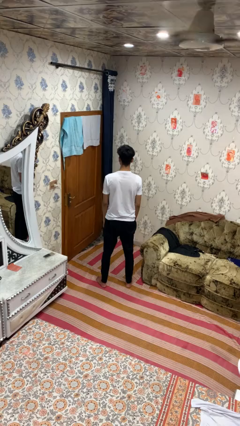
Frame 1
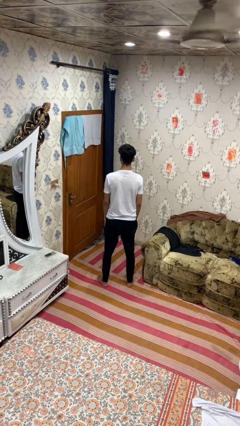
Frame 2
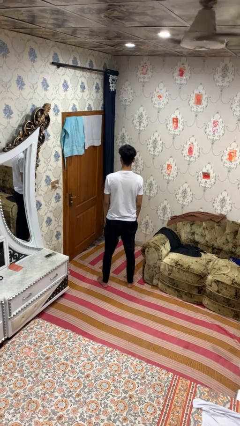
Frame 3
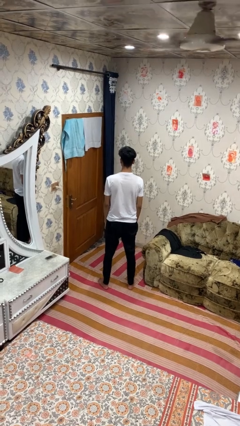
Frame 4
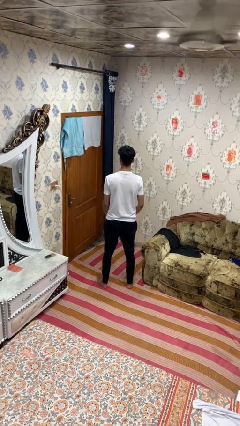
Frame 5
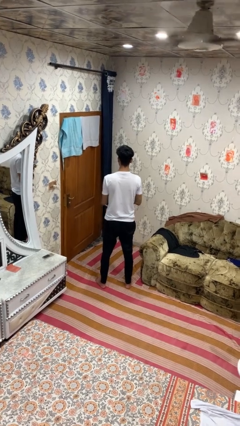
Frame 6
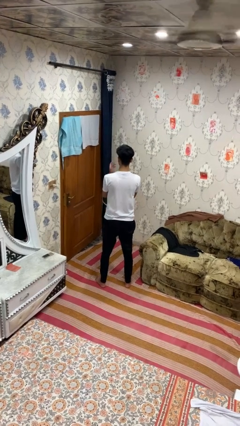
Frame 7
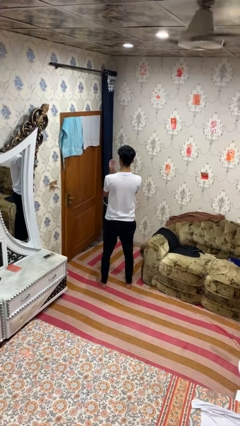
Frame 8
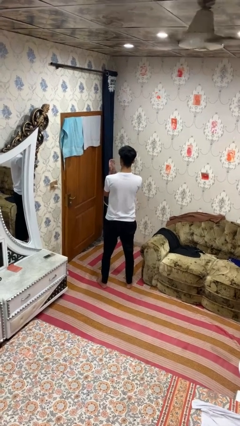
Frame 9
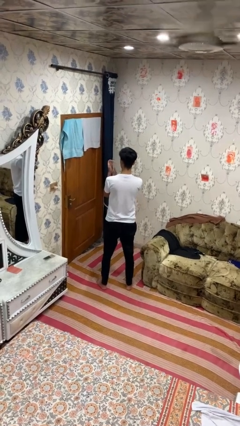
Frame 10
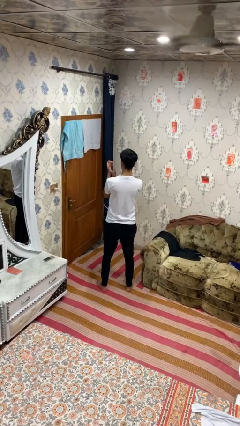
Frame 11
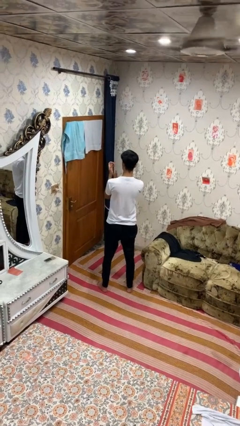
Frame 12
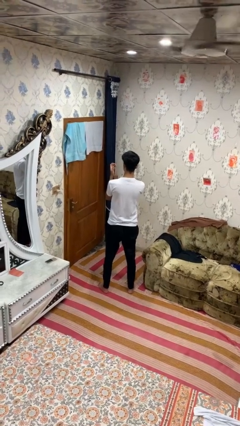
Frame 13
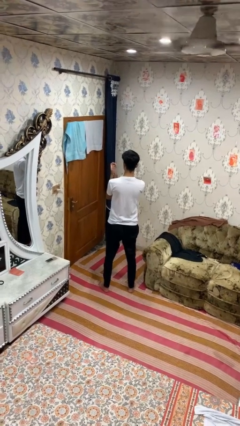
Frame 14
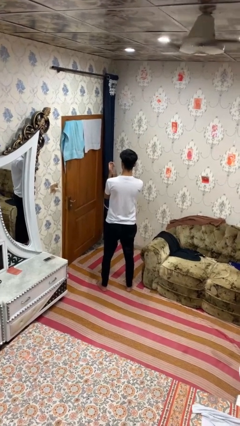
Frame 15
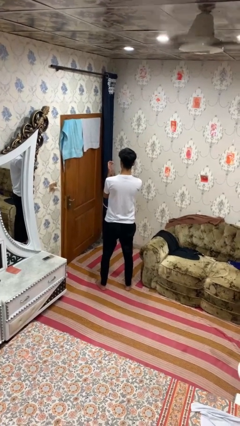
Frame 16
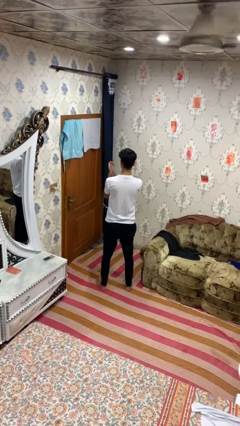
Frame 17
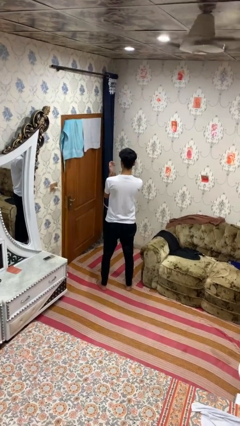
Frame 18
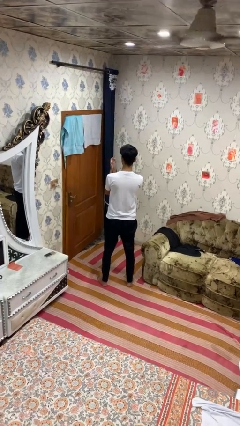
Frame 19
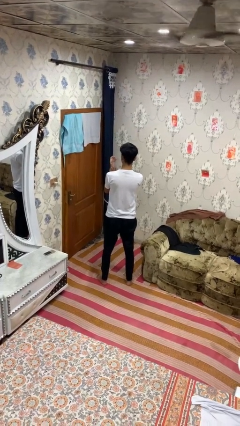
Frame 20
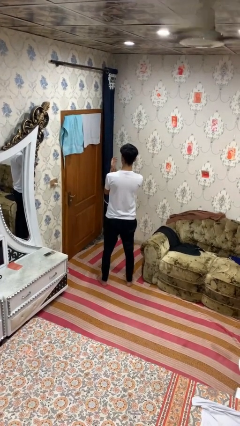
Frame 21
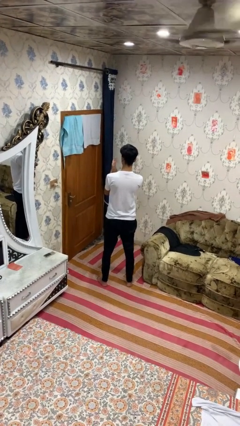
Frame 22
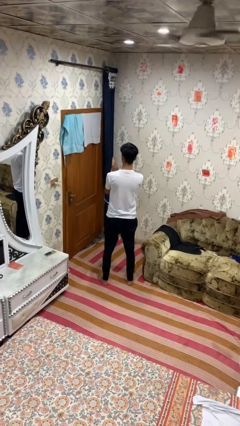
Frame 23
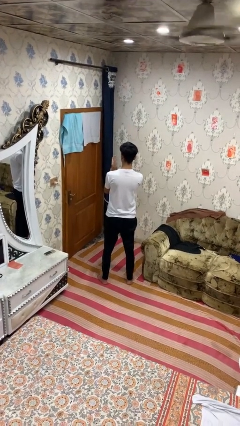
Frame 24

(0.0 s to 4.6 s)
person claps hands

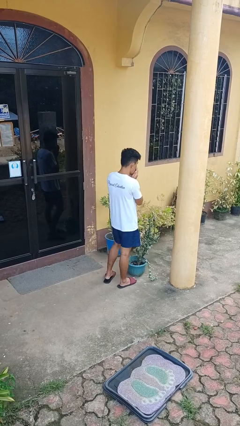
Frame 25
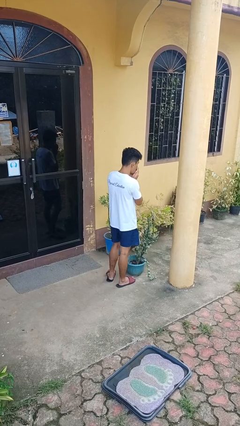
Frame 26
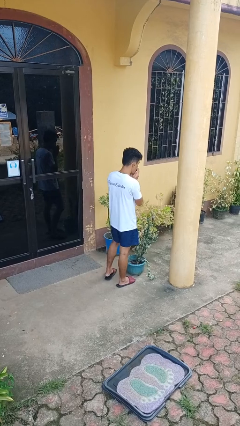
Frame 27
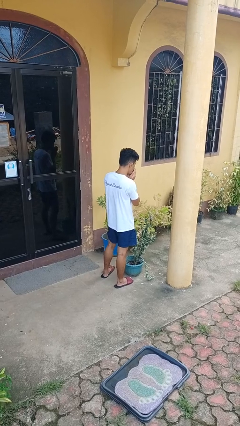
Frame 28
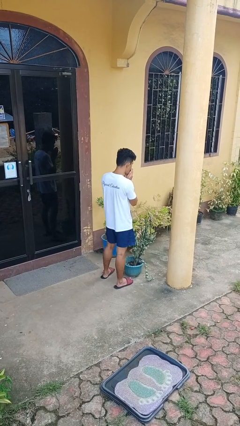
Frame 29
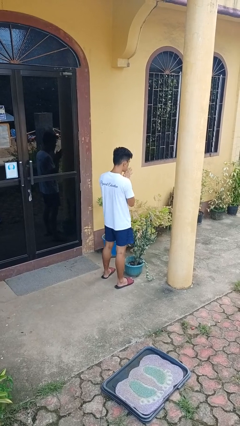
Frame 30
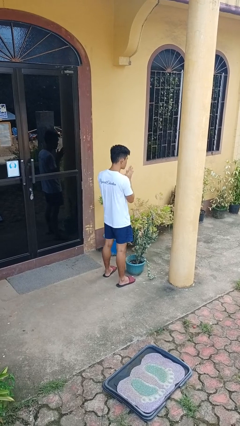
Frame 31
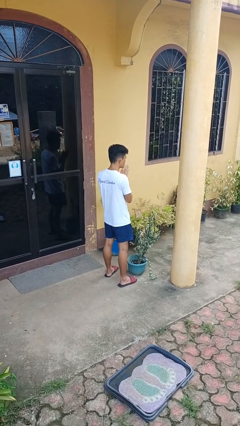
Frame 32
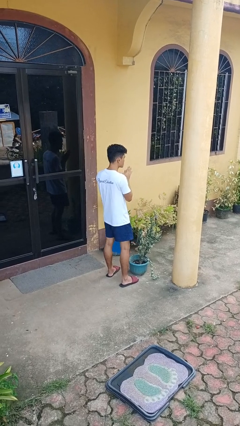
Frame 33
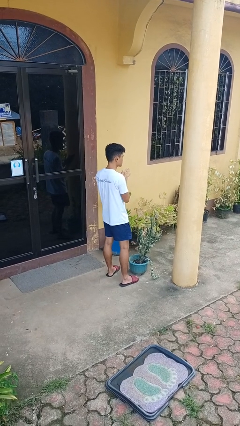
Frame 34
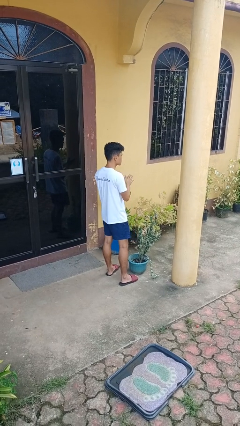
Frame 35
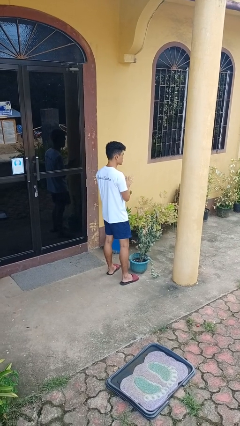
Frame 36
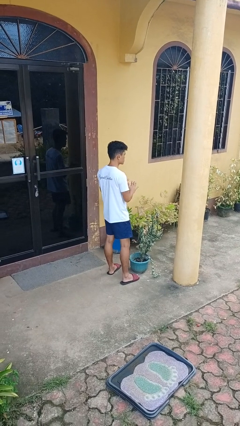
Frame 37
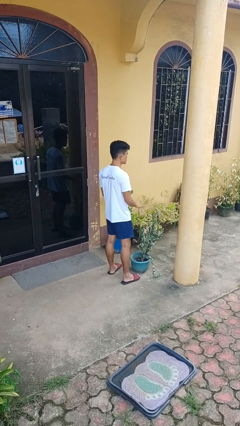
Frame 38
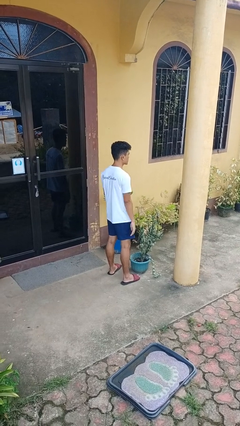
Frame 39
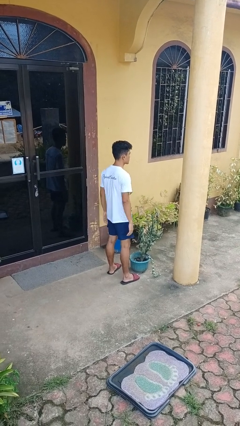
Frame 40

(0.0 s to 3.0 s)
person blows into hands

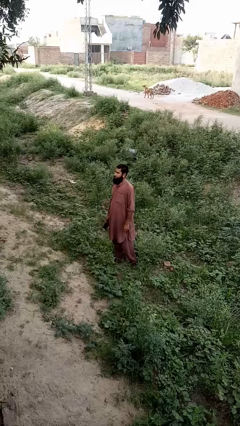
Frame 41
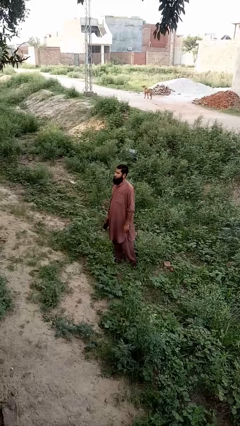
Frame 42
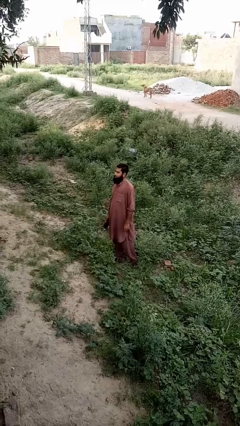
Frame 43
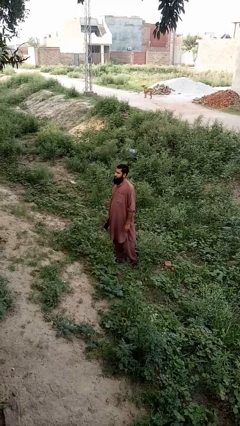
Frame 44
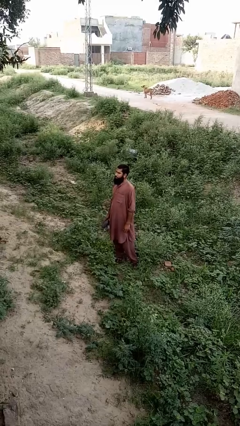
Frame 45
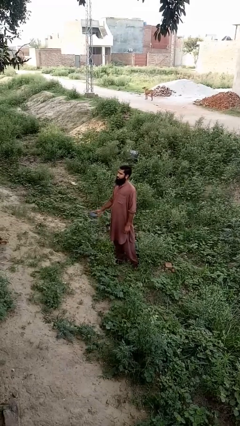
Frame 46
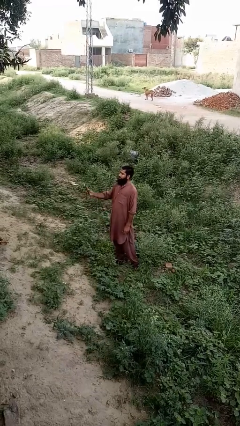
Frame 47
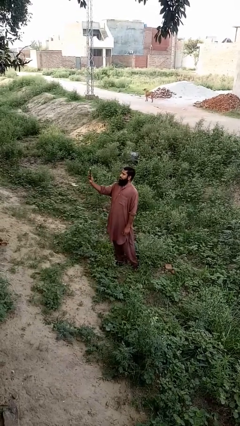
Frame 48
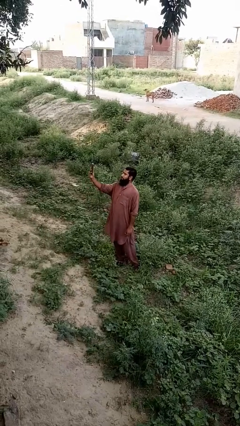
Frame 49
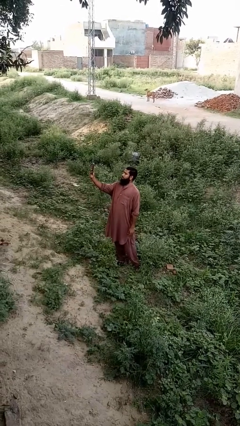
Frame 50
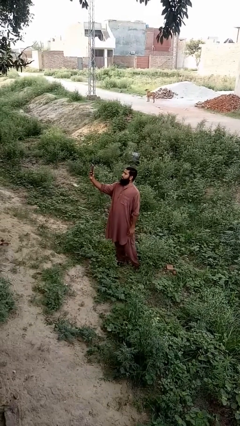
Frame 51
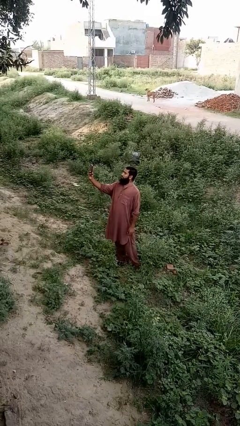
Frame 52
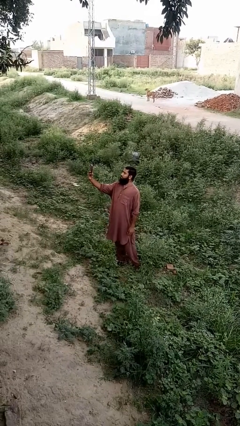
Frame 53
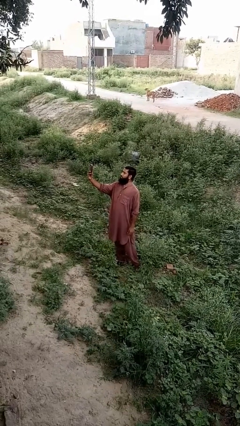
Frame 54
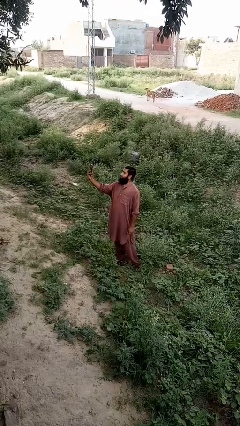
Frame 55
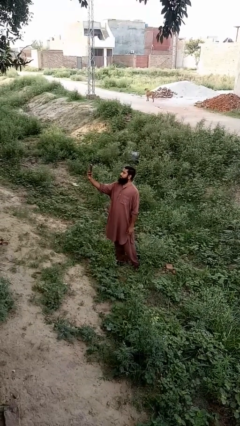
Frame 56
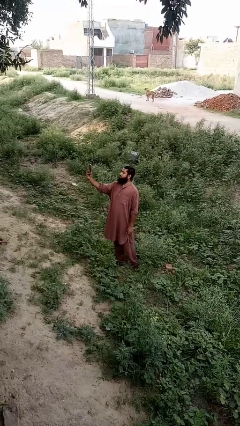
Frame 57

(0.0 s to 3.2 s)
person takes selfie

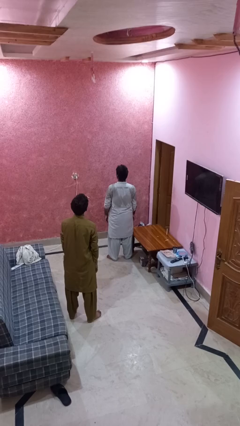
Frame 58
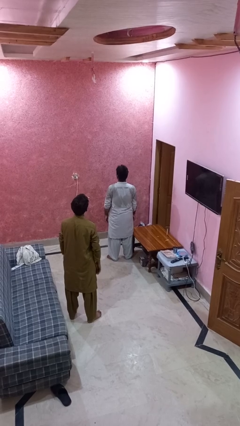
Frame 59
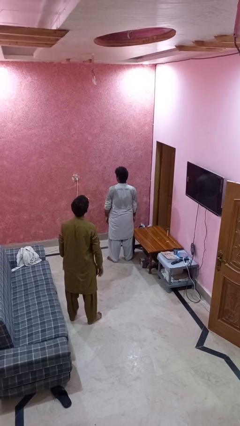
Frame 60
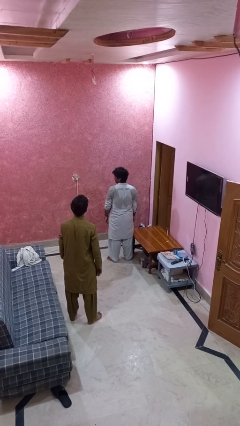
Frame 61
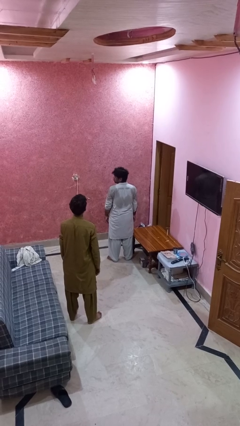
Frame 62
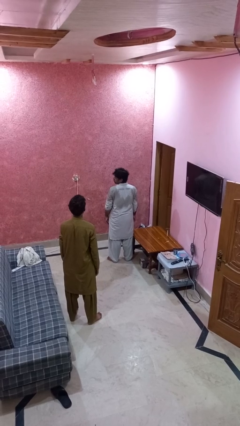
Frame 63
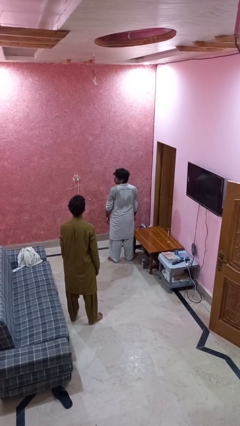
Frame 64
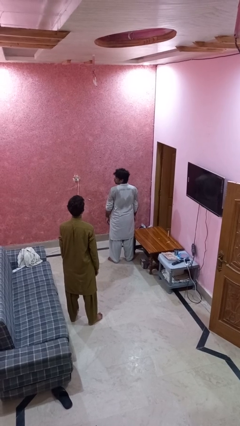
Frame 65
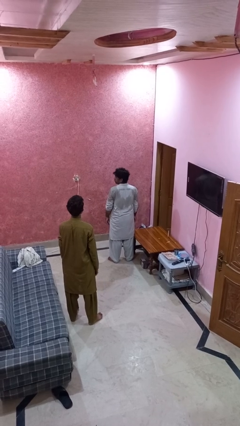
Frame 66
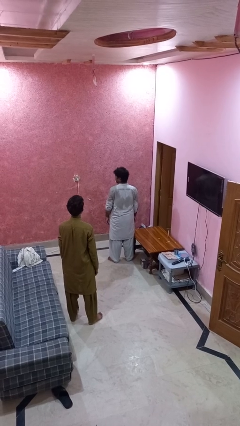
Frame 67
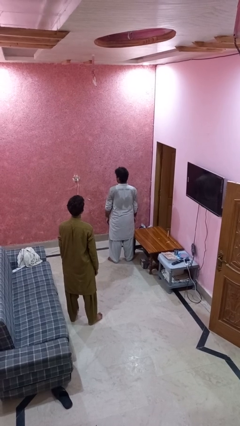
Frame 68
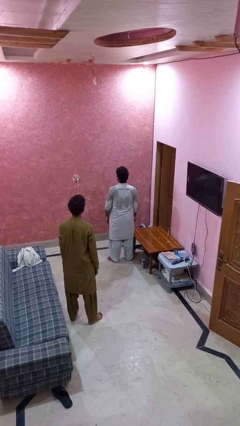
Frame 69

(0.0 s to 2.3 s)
person looks over shoulder

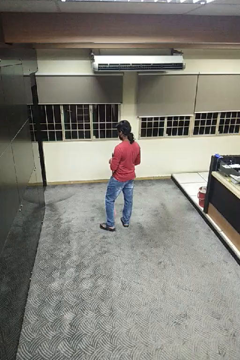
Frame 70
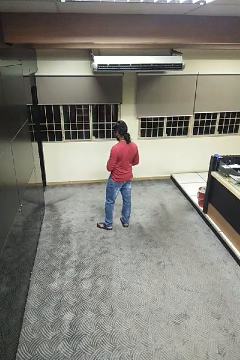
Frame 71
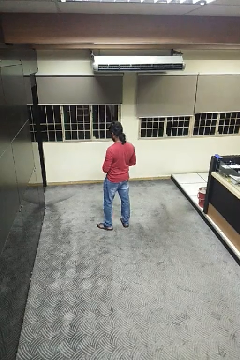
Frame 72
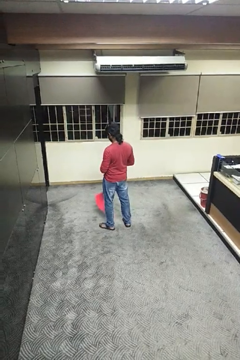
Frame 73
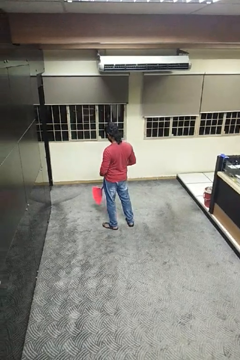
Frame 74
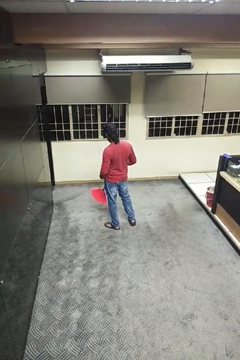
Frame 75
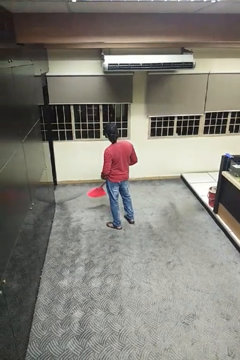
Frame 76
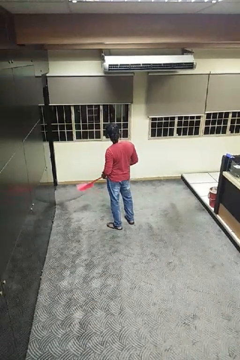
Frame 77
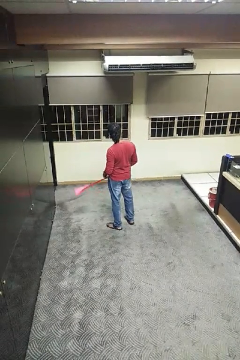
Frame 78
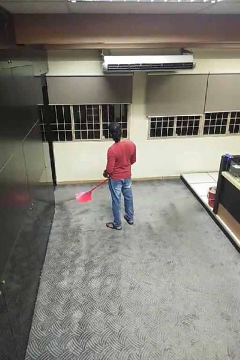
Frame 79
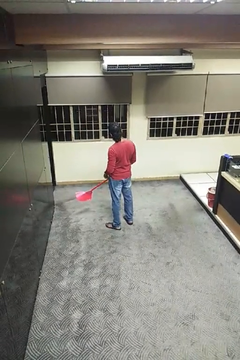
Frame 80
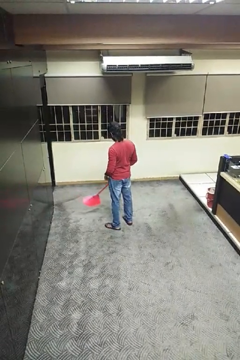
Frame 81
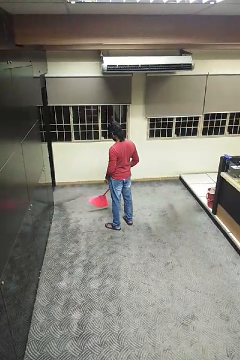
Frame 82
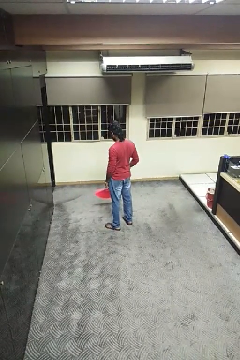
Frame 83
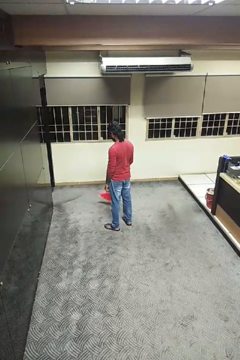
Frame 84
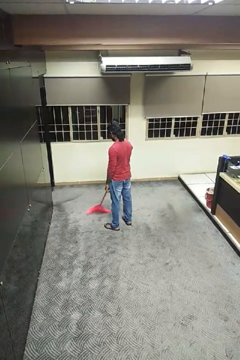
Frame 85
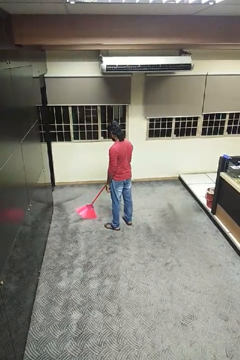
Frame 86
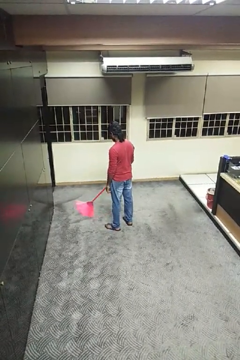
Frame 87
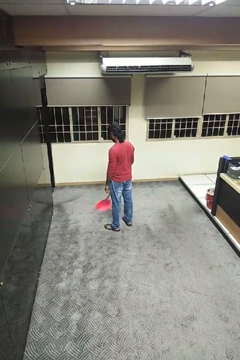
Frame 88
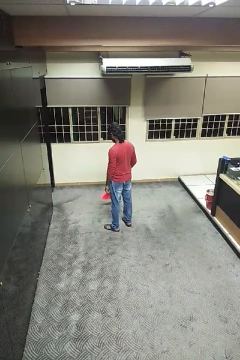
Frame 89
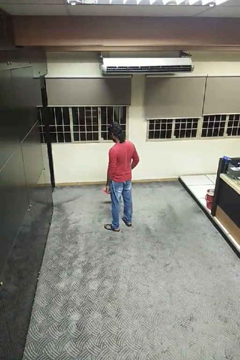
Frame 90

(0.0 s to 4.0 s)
person sweeps floor

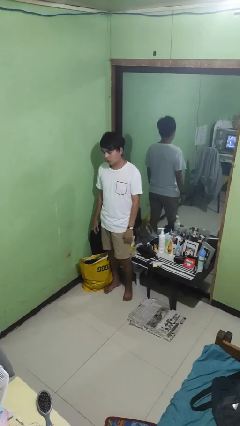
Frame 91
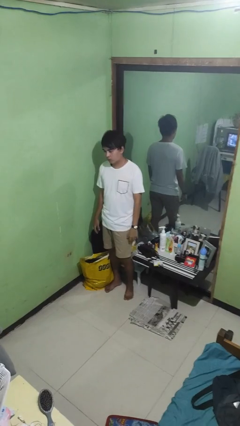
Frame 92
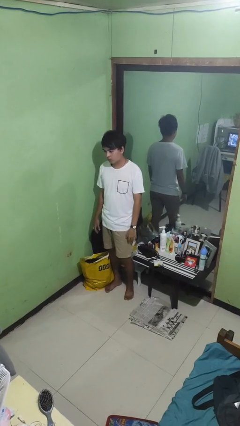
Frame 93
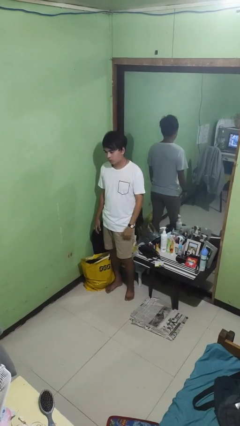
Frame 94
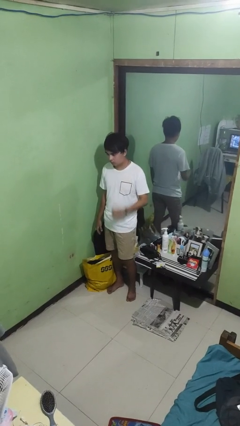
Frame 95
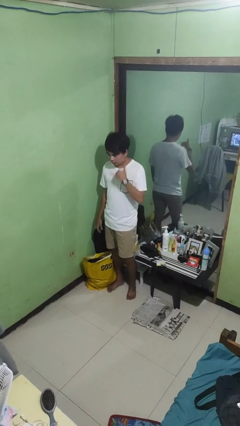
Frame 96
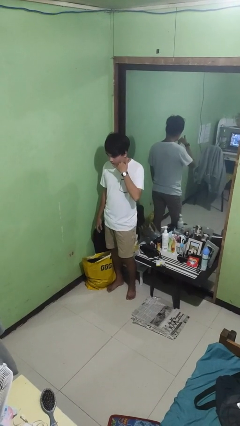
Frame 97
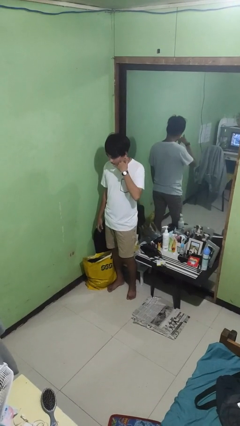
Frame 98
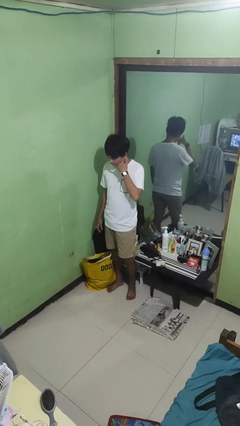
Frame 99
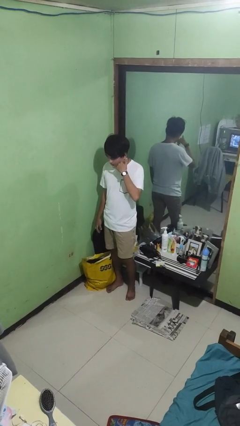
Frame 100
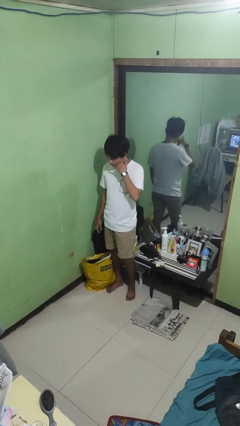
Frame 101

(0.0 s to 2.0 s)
person gestures call me
